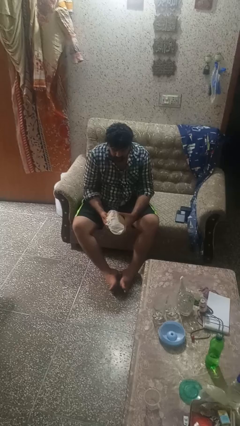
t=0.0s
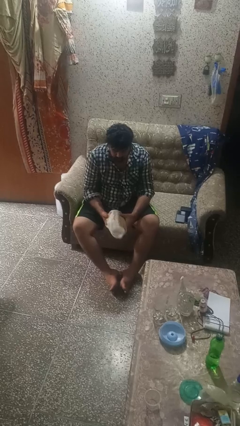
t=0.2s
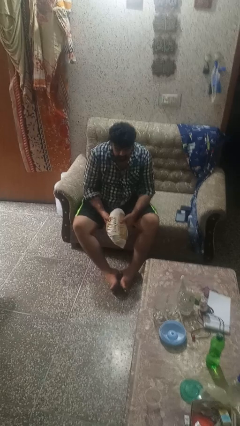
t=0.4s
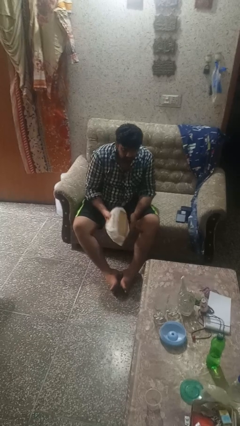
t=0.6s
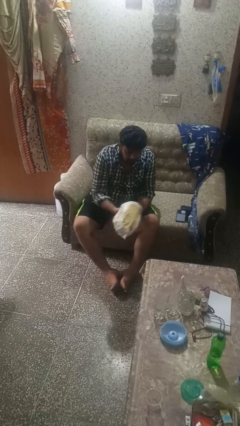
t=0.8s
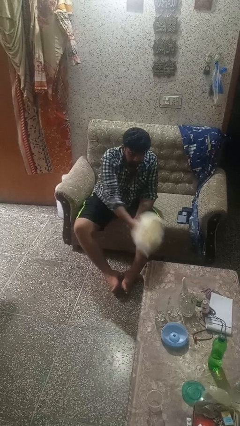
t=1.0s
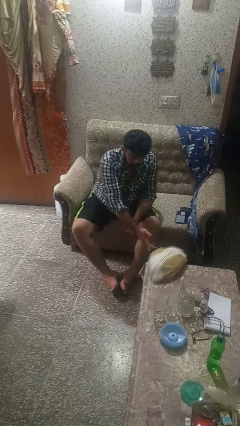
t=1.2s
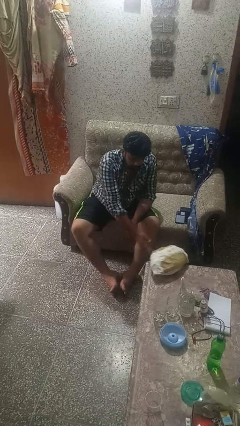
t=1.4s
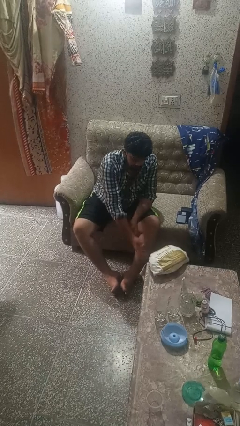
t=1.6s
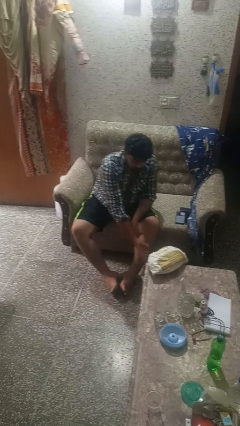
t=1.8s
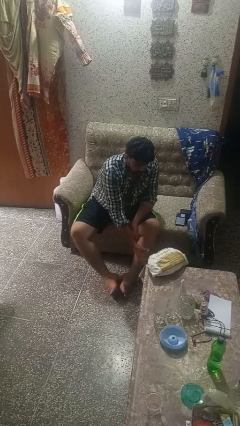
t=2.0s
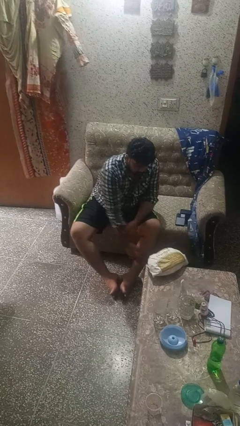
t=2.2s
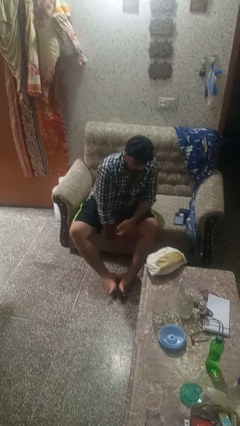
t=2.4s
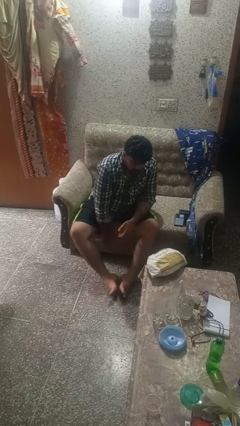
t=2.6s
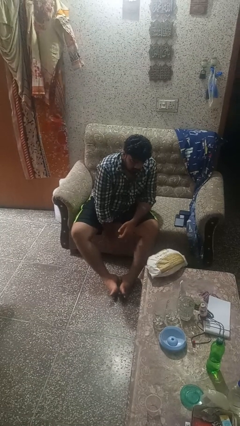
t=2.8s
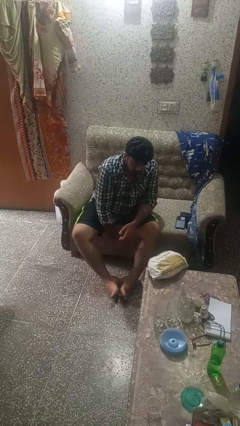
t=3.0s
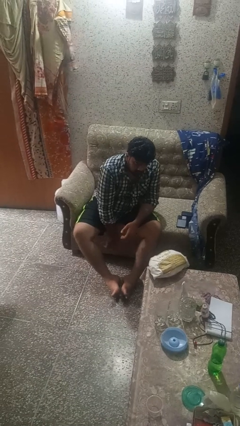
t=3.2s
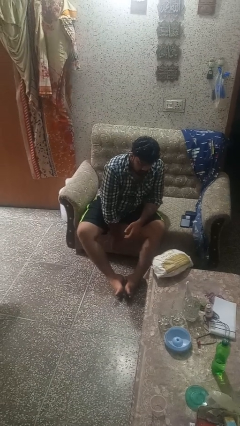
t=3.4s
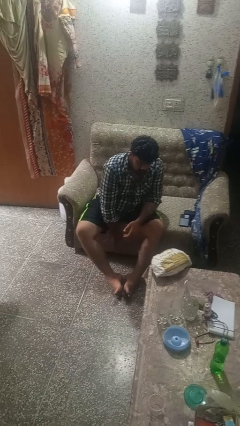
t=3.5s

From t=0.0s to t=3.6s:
person throws object on table

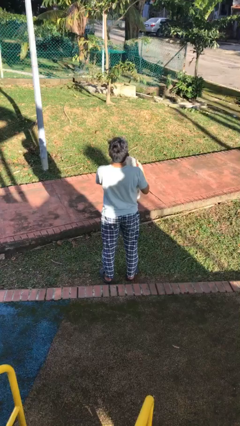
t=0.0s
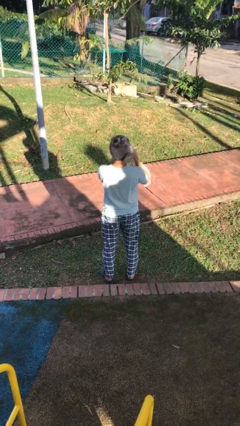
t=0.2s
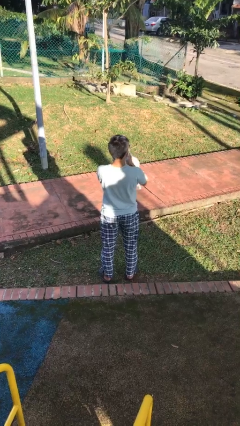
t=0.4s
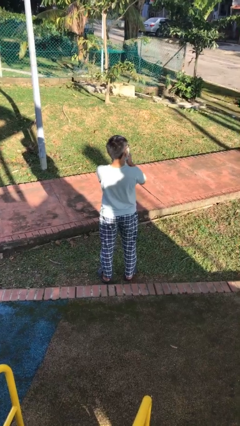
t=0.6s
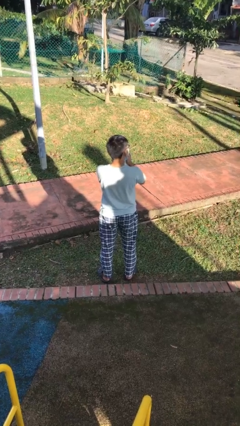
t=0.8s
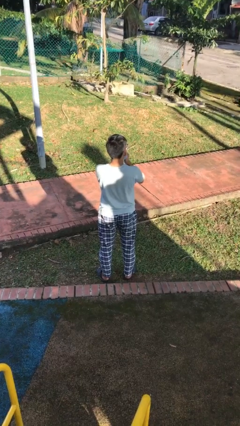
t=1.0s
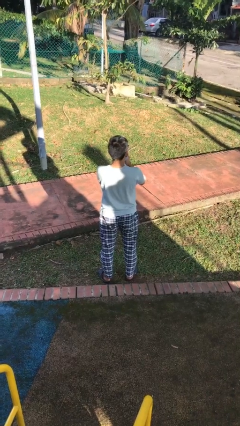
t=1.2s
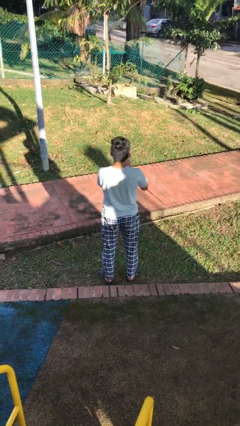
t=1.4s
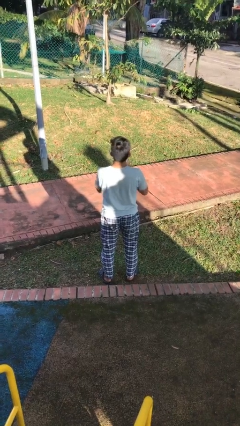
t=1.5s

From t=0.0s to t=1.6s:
person blows nose

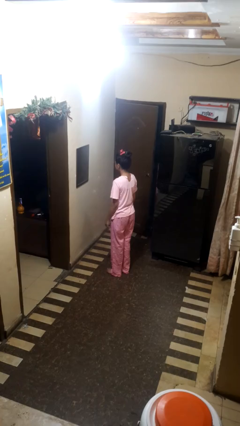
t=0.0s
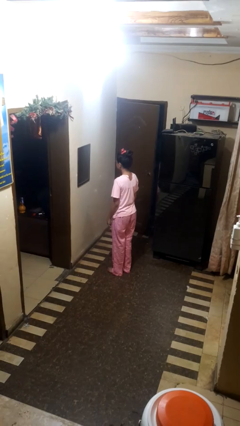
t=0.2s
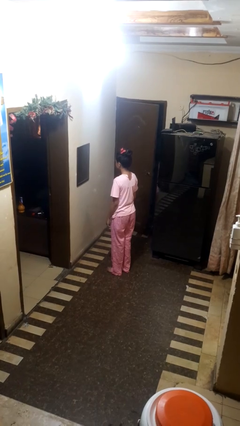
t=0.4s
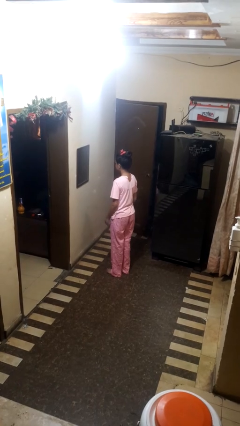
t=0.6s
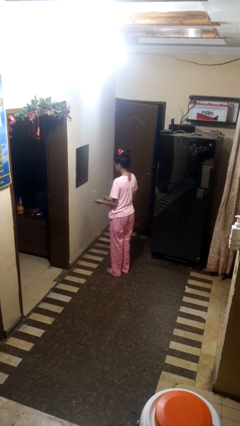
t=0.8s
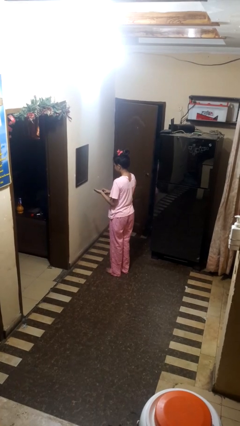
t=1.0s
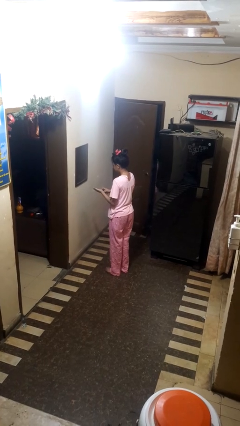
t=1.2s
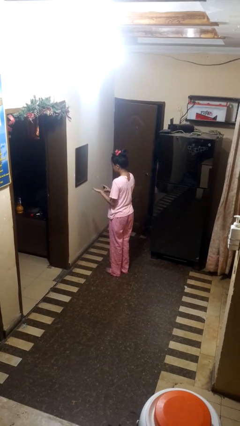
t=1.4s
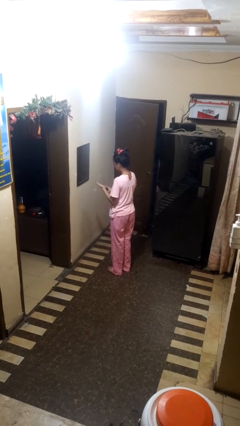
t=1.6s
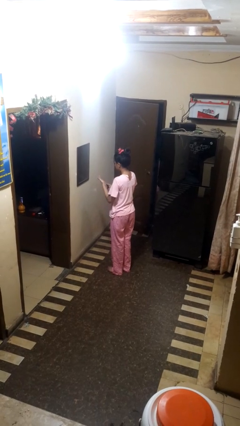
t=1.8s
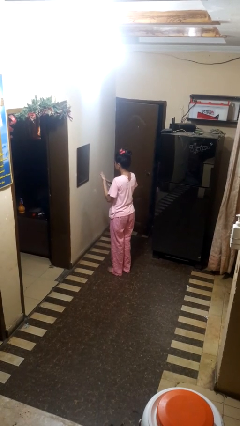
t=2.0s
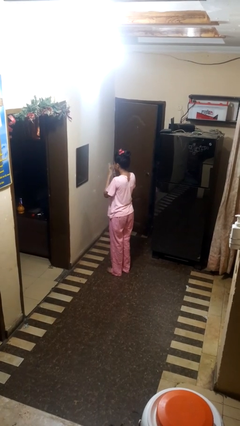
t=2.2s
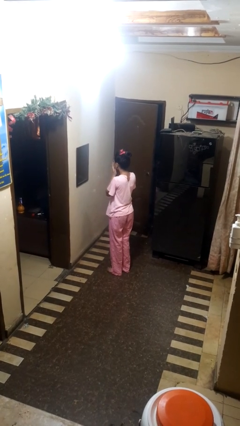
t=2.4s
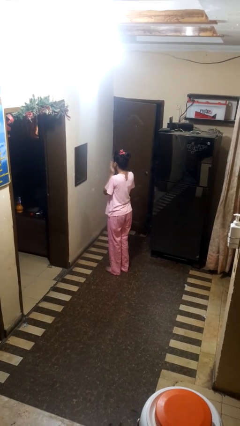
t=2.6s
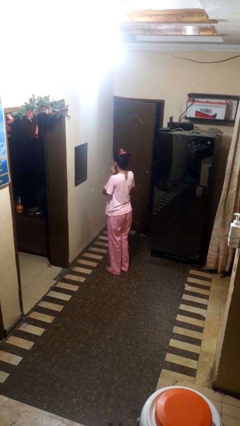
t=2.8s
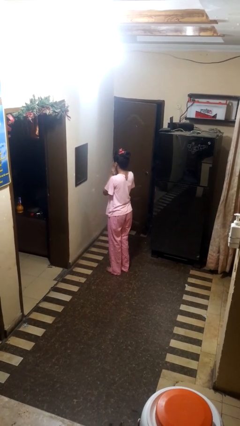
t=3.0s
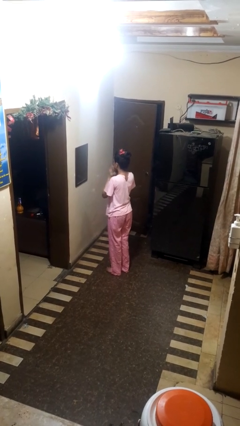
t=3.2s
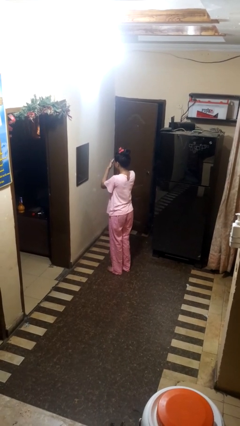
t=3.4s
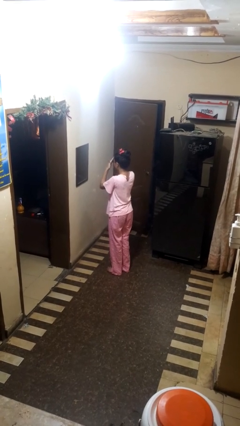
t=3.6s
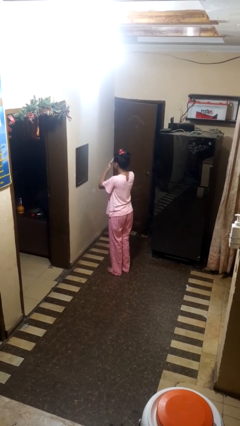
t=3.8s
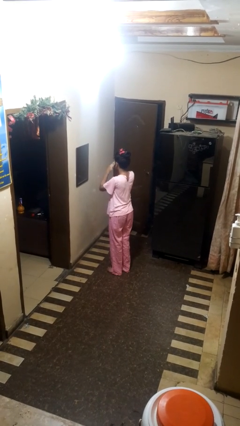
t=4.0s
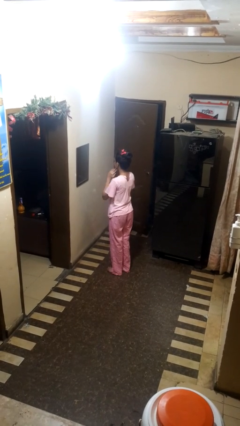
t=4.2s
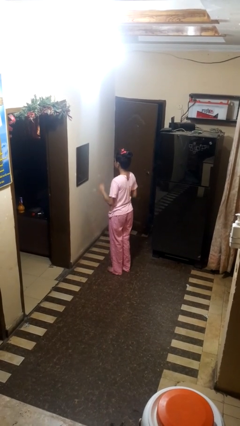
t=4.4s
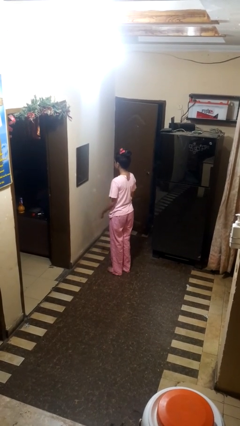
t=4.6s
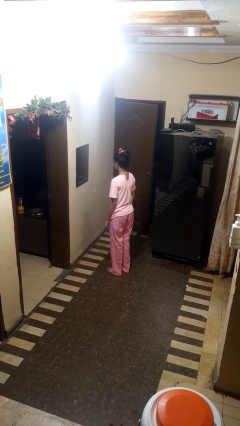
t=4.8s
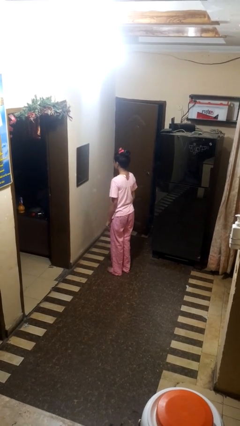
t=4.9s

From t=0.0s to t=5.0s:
person applies foundation makeup

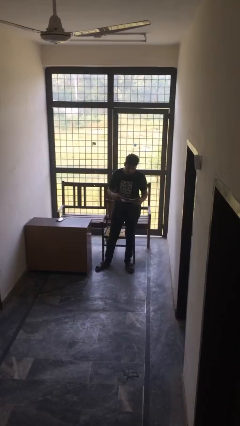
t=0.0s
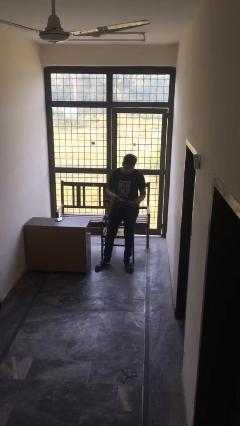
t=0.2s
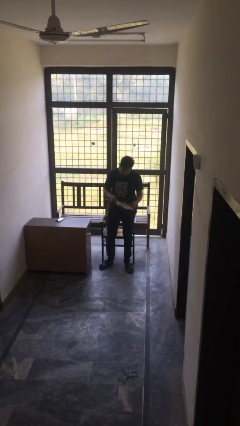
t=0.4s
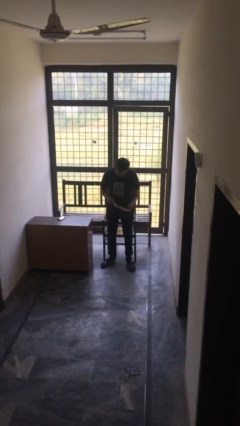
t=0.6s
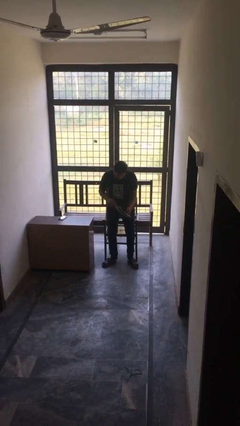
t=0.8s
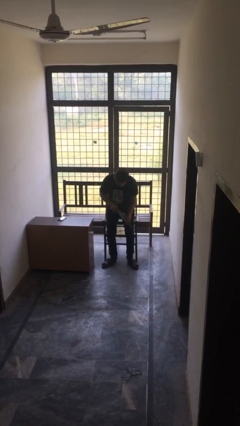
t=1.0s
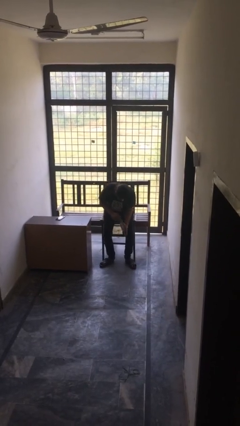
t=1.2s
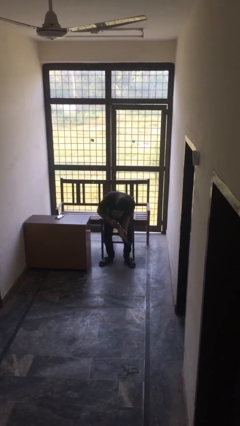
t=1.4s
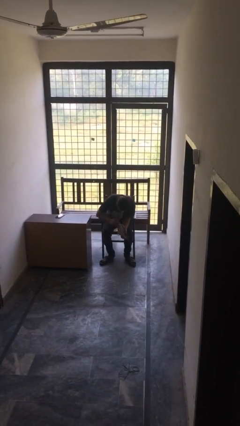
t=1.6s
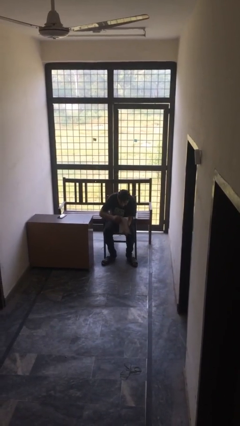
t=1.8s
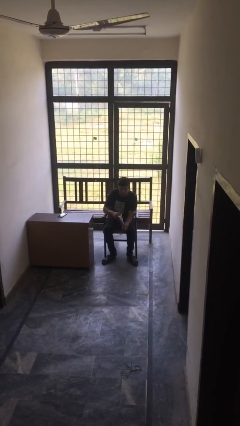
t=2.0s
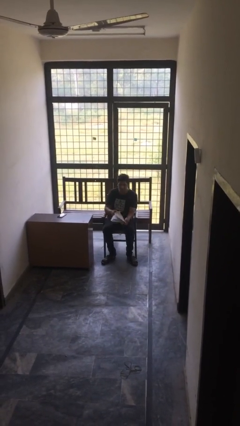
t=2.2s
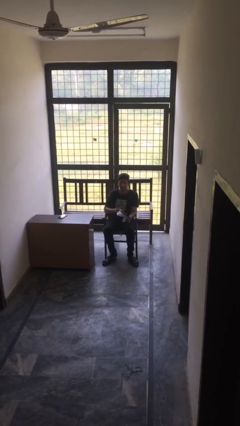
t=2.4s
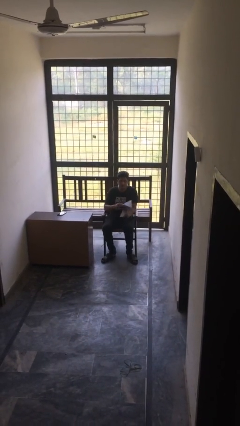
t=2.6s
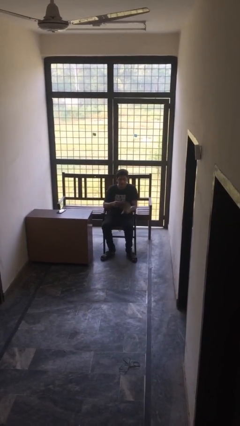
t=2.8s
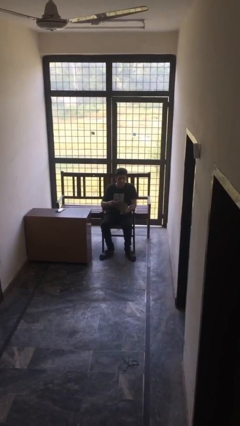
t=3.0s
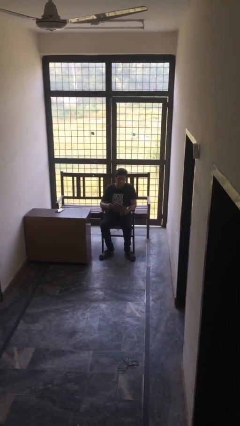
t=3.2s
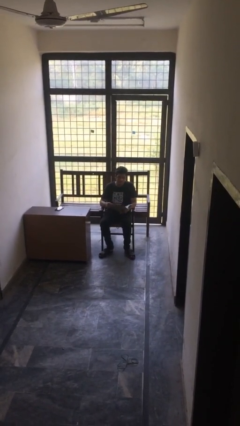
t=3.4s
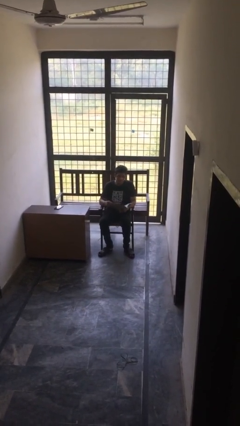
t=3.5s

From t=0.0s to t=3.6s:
person sits down

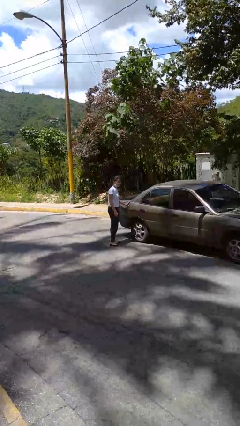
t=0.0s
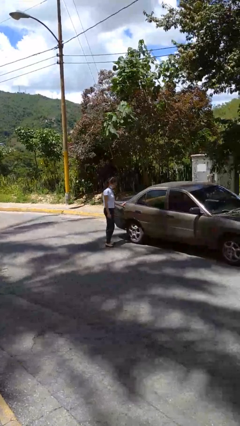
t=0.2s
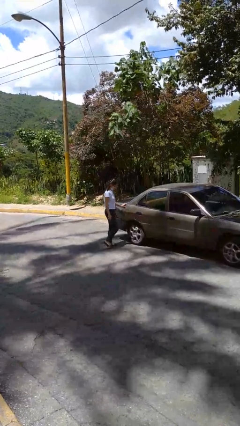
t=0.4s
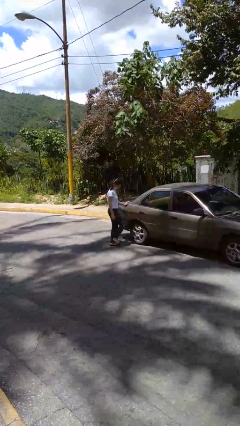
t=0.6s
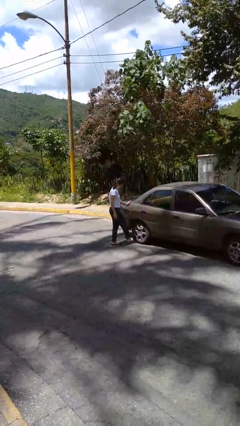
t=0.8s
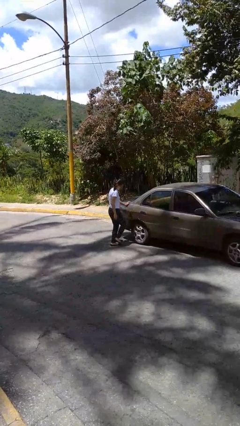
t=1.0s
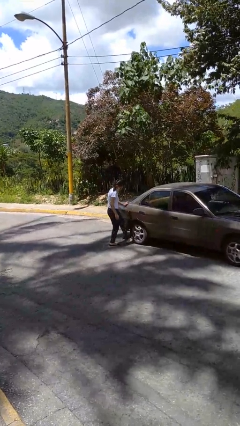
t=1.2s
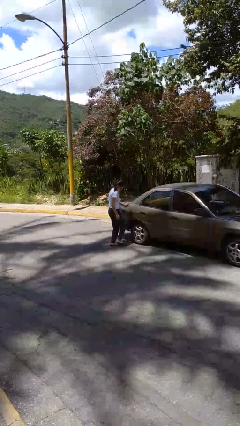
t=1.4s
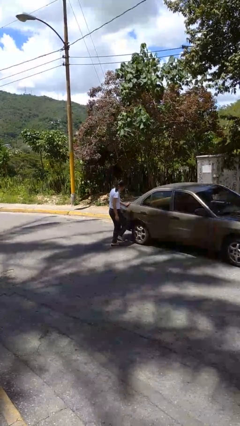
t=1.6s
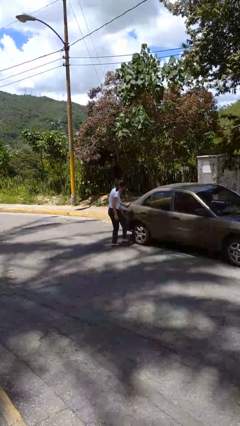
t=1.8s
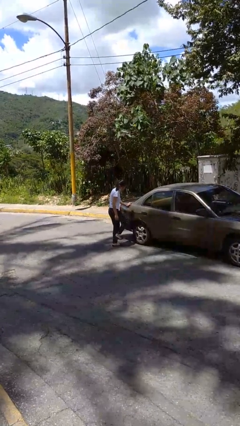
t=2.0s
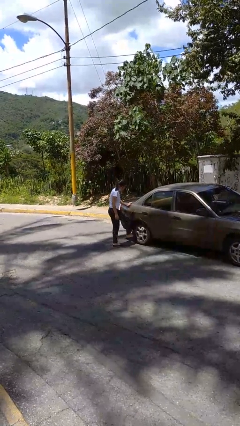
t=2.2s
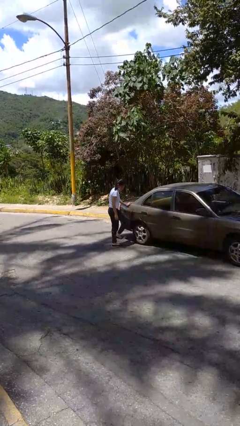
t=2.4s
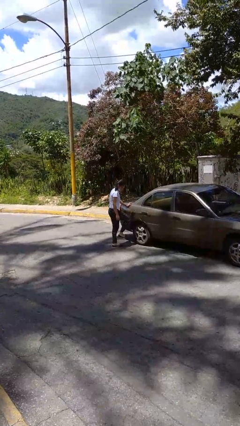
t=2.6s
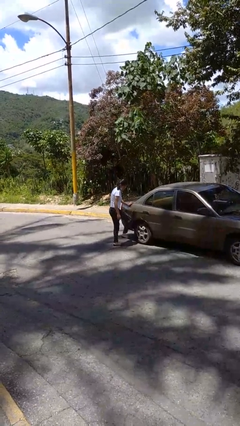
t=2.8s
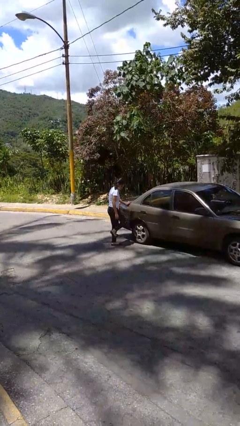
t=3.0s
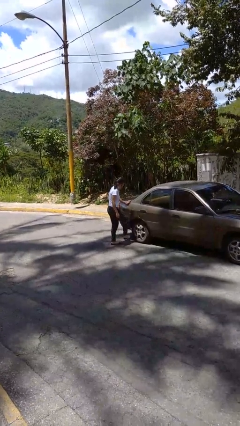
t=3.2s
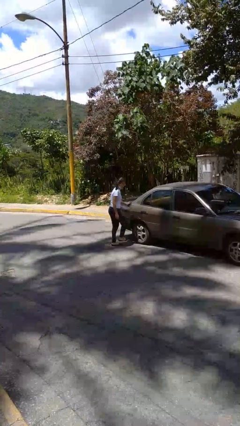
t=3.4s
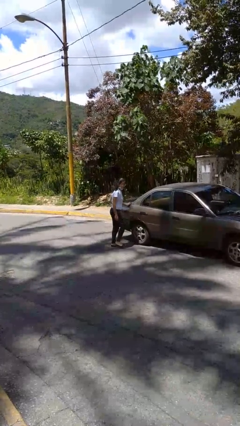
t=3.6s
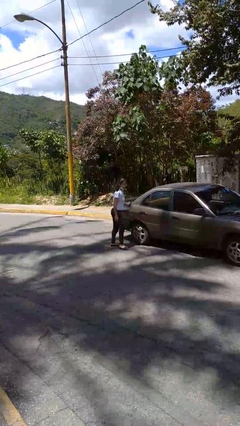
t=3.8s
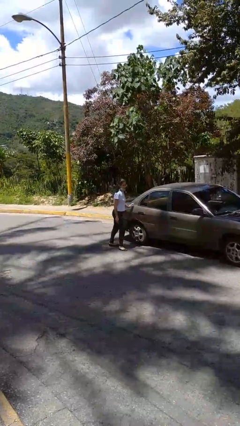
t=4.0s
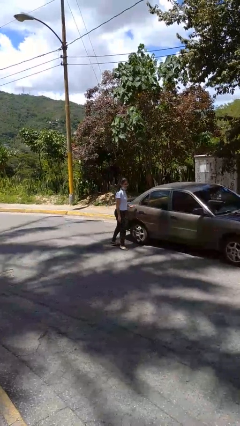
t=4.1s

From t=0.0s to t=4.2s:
person kicks car tires
